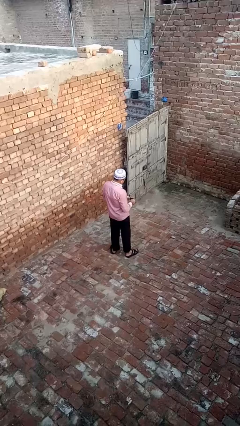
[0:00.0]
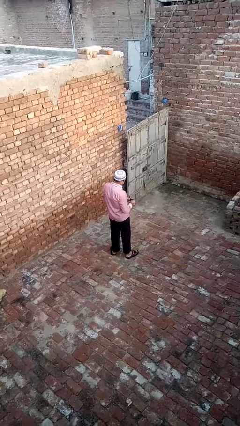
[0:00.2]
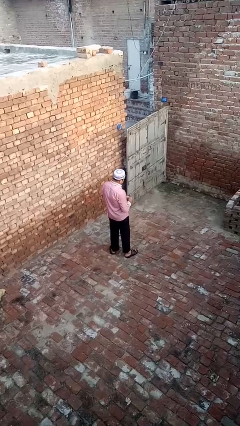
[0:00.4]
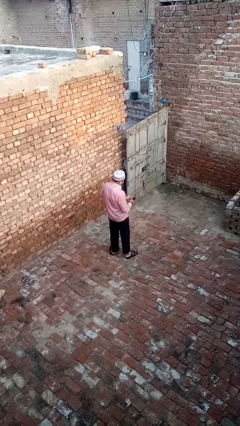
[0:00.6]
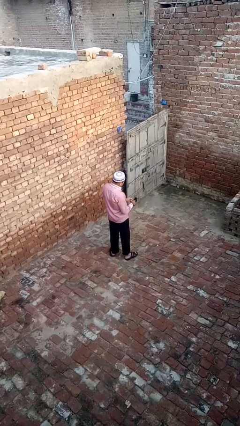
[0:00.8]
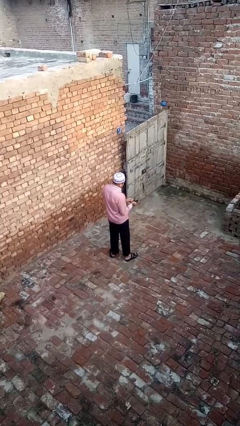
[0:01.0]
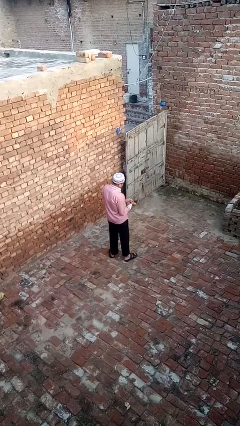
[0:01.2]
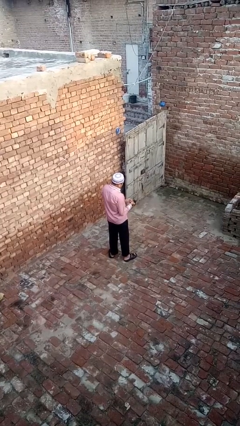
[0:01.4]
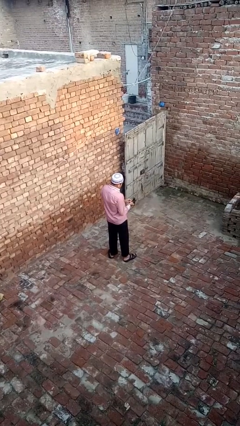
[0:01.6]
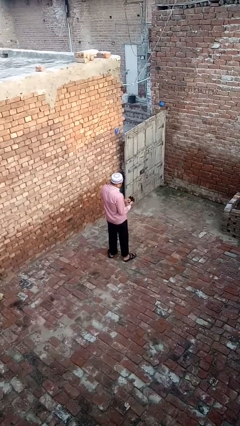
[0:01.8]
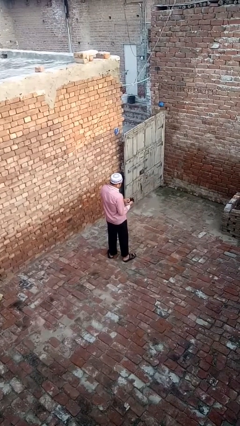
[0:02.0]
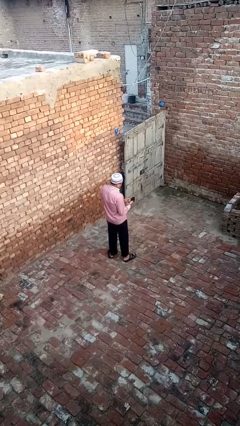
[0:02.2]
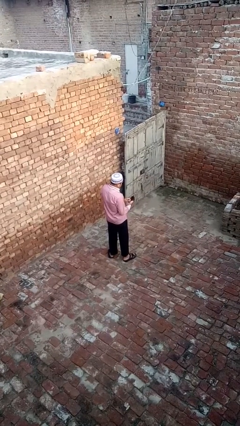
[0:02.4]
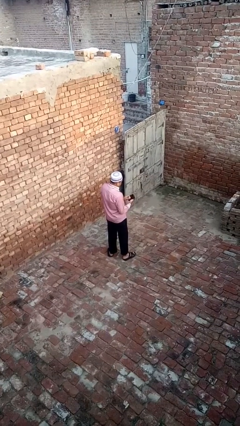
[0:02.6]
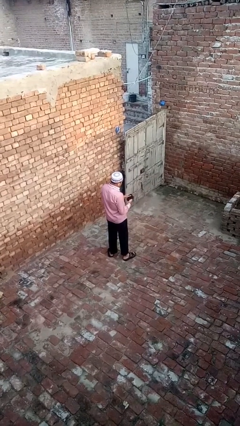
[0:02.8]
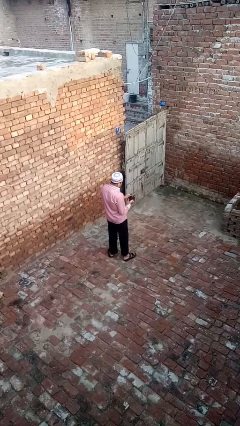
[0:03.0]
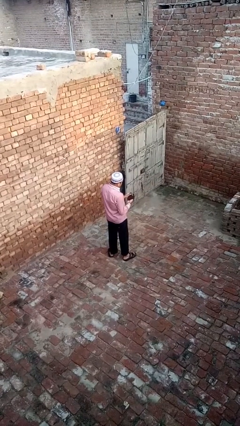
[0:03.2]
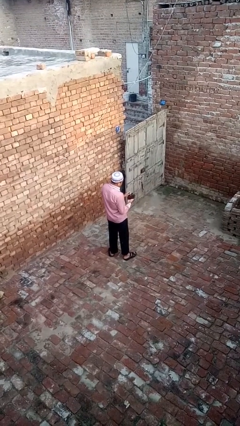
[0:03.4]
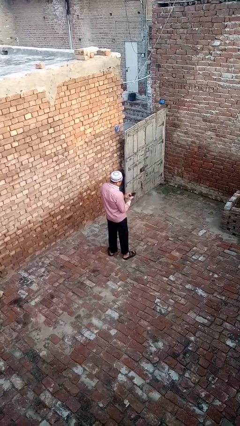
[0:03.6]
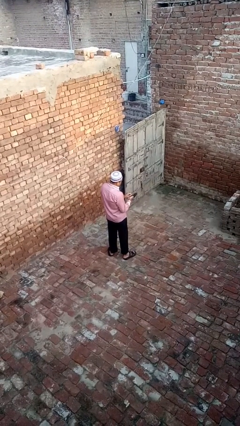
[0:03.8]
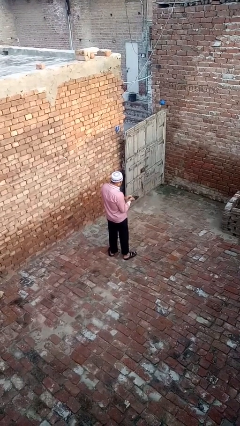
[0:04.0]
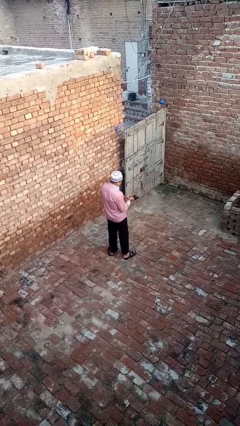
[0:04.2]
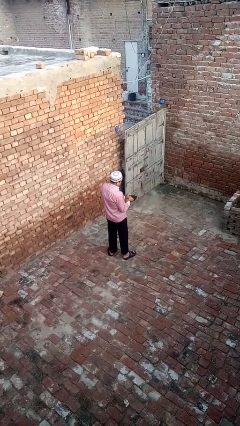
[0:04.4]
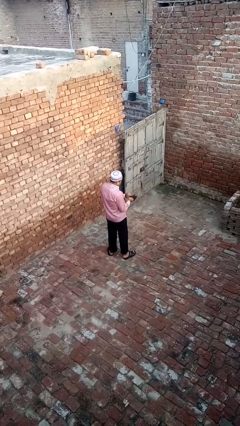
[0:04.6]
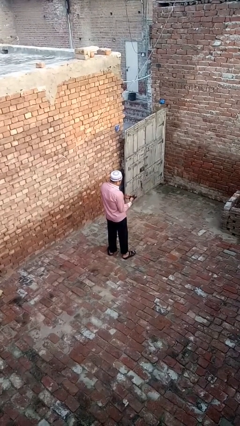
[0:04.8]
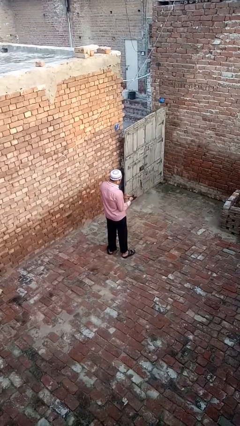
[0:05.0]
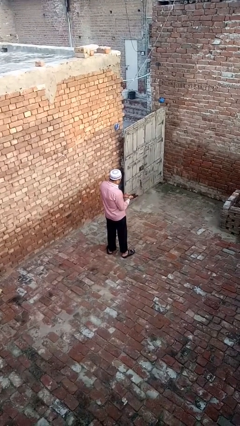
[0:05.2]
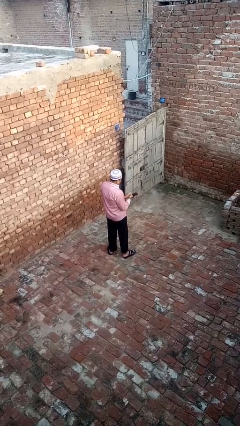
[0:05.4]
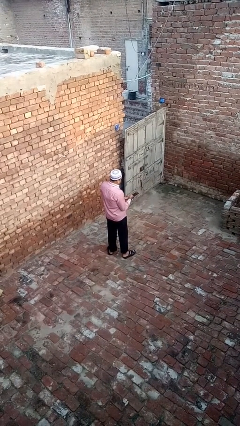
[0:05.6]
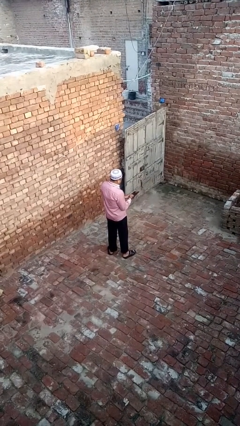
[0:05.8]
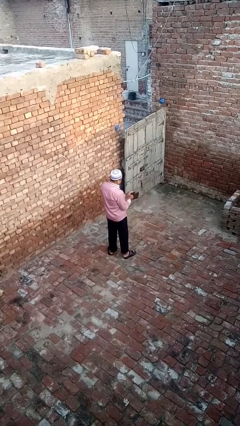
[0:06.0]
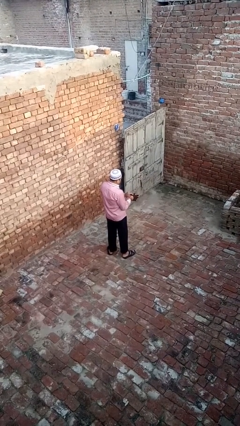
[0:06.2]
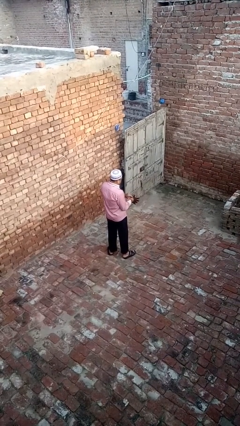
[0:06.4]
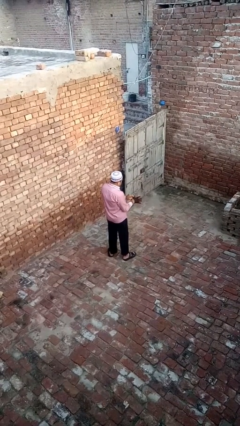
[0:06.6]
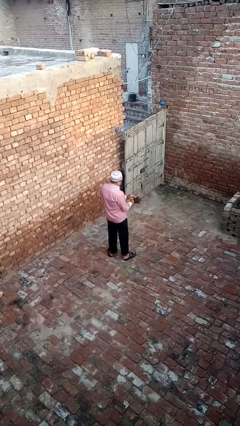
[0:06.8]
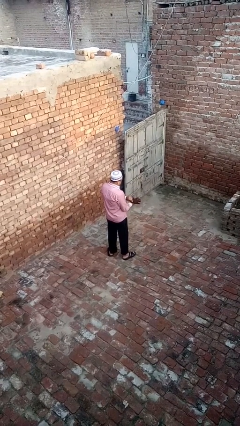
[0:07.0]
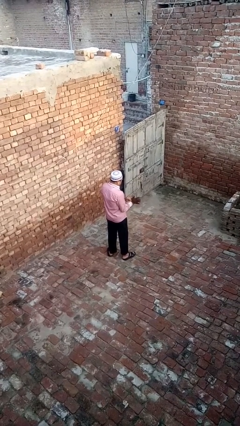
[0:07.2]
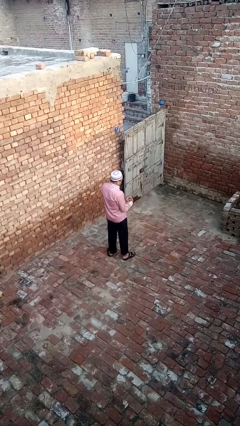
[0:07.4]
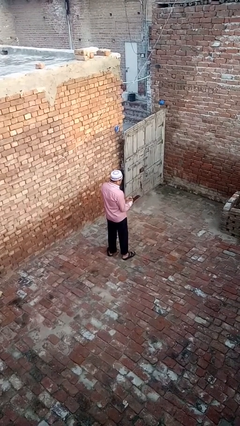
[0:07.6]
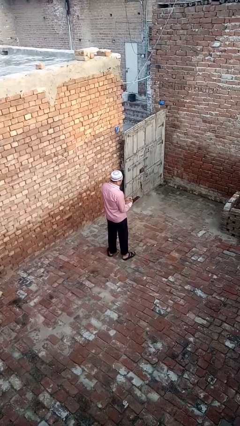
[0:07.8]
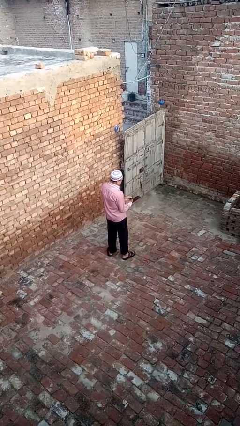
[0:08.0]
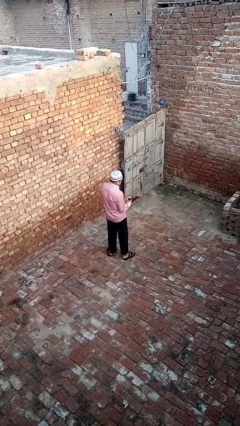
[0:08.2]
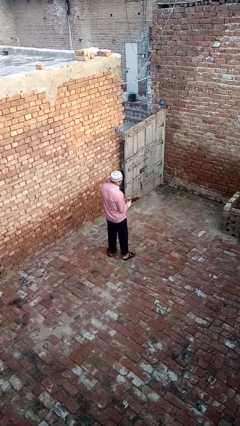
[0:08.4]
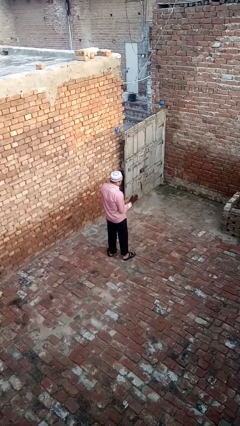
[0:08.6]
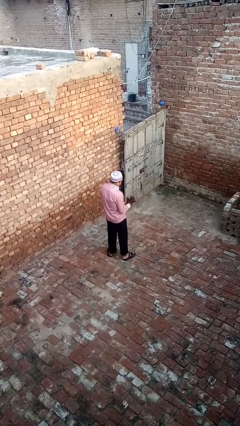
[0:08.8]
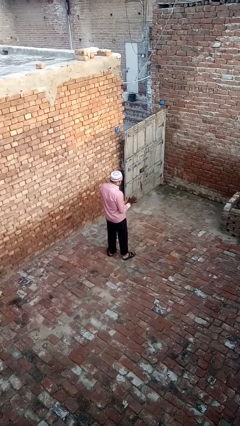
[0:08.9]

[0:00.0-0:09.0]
person puts on gloves

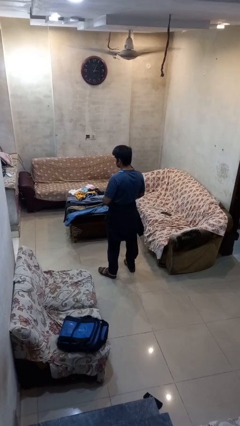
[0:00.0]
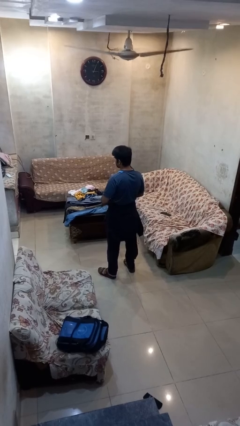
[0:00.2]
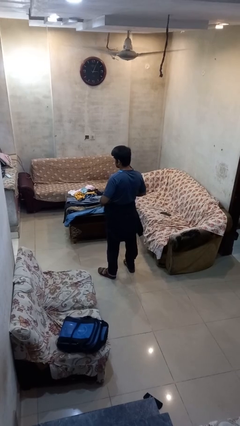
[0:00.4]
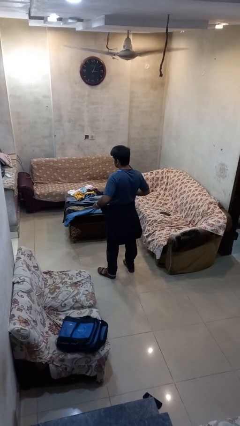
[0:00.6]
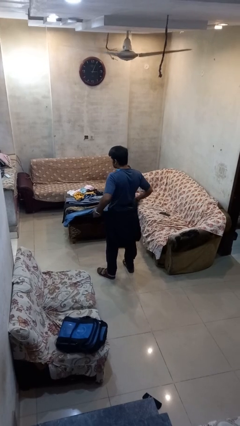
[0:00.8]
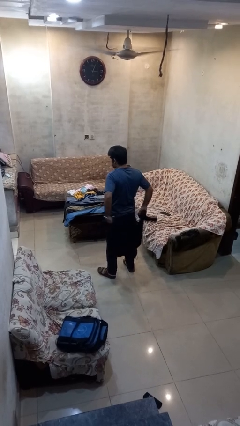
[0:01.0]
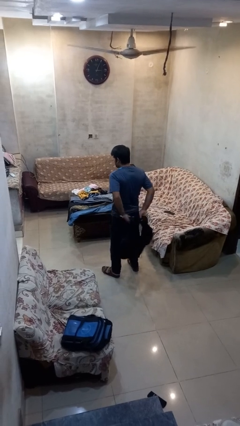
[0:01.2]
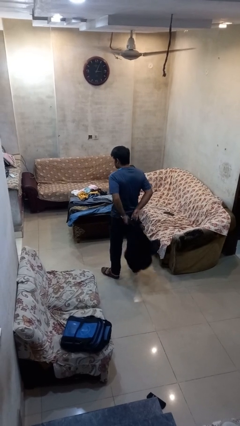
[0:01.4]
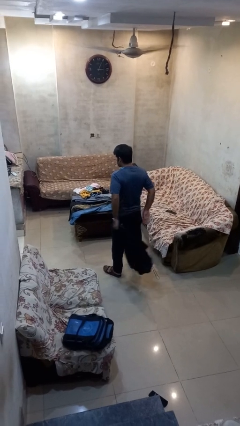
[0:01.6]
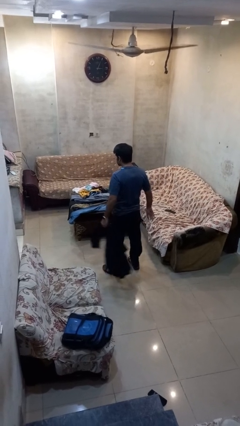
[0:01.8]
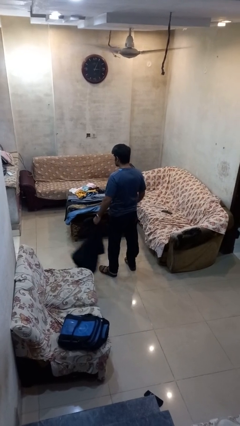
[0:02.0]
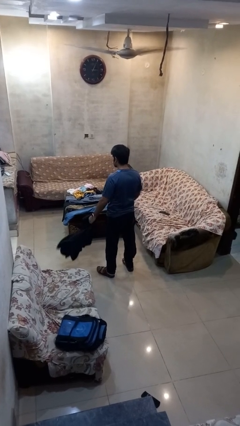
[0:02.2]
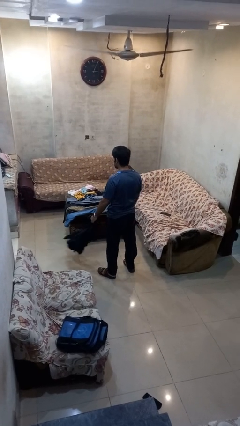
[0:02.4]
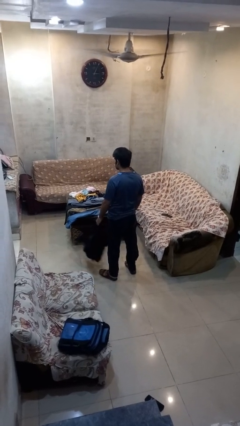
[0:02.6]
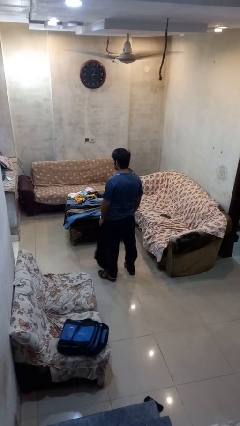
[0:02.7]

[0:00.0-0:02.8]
person unties jacket around waist

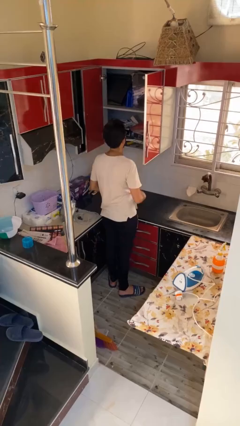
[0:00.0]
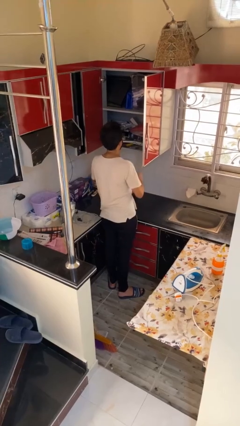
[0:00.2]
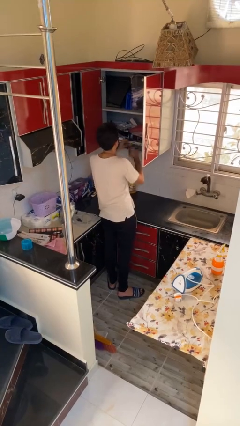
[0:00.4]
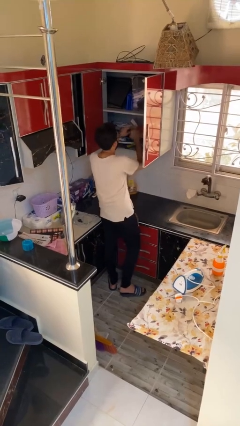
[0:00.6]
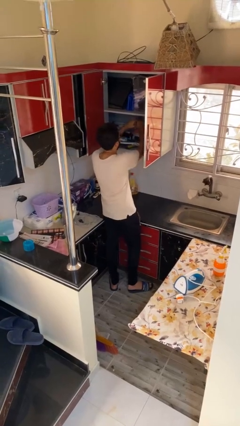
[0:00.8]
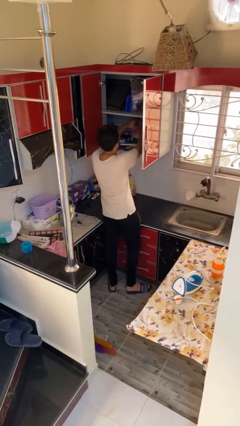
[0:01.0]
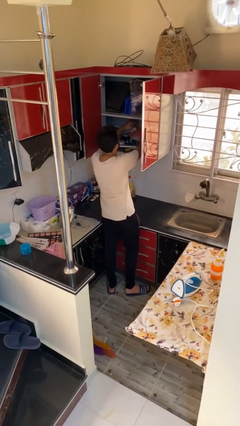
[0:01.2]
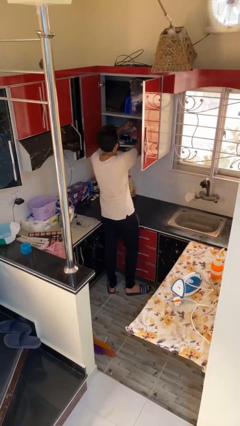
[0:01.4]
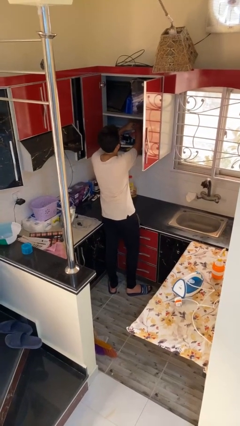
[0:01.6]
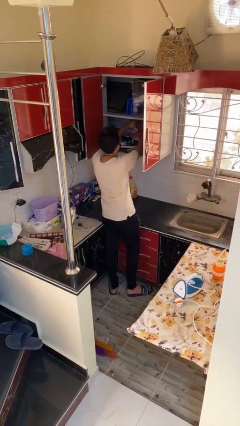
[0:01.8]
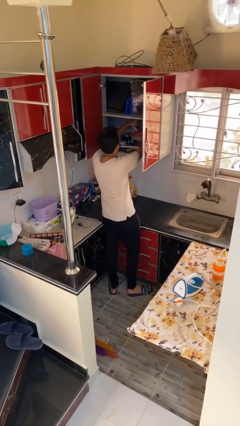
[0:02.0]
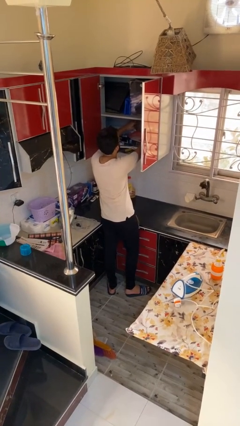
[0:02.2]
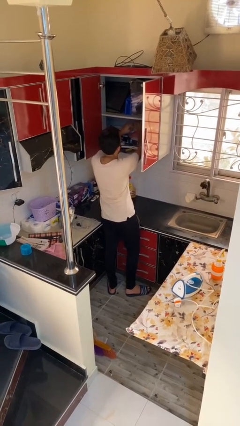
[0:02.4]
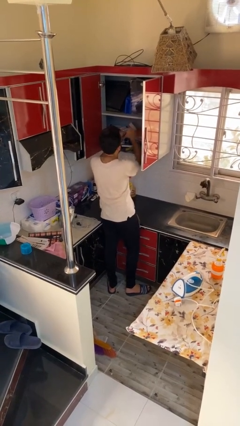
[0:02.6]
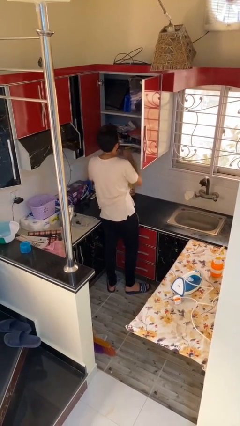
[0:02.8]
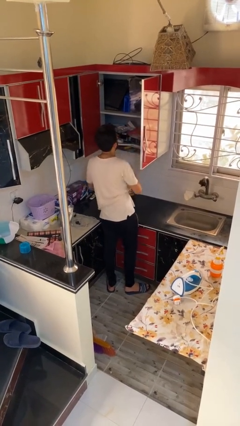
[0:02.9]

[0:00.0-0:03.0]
person searches in cabinet

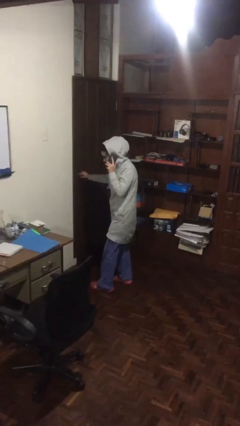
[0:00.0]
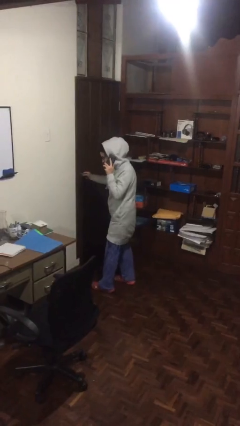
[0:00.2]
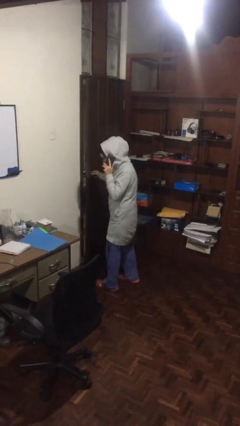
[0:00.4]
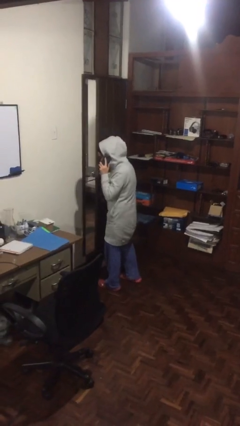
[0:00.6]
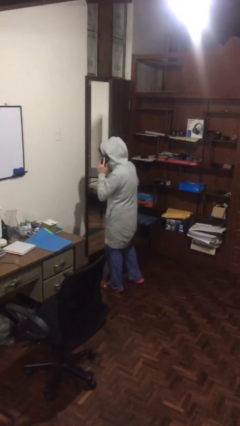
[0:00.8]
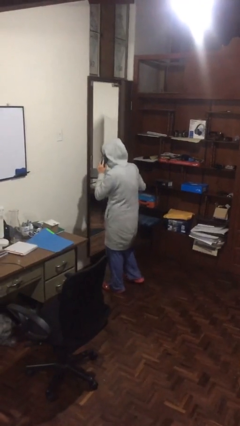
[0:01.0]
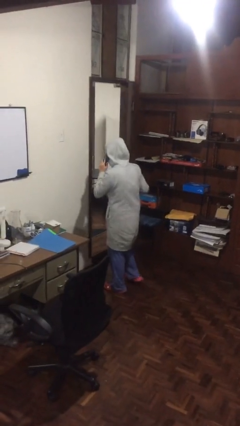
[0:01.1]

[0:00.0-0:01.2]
person opens facility door

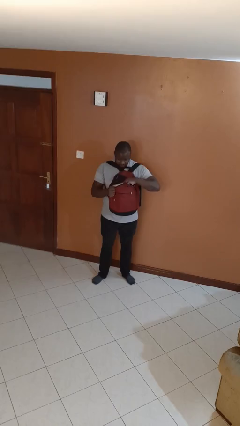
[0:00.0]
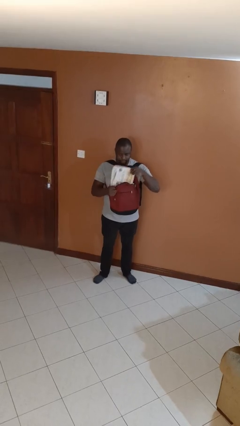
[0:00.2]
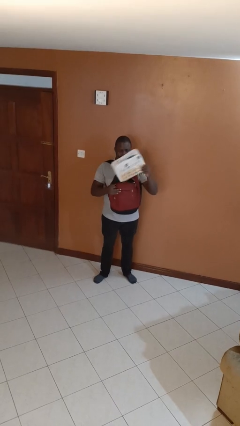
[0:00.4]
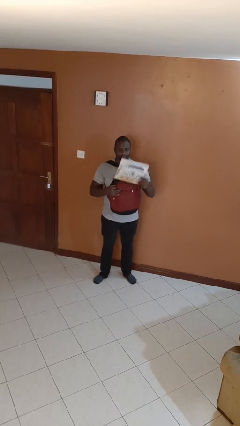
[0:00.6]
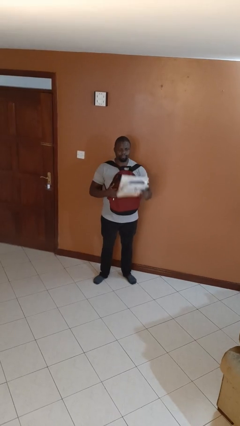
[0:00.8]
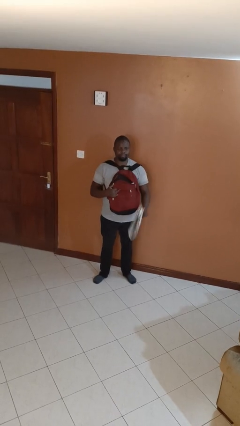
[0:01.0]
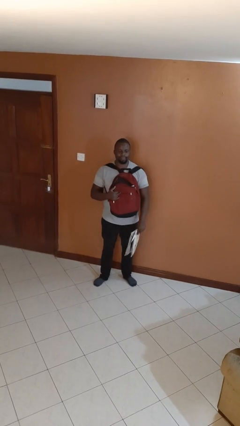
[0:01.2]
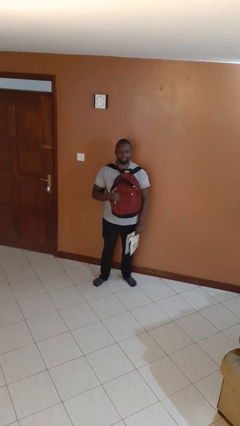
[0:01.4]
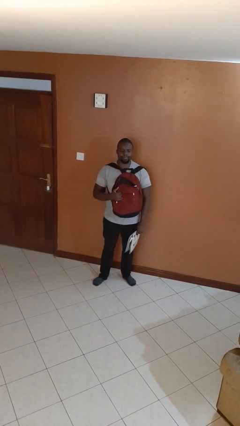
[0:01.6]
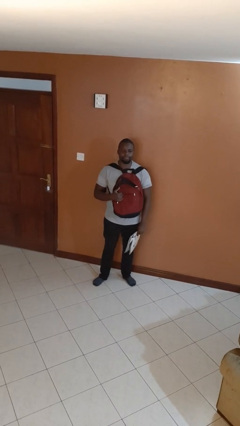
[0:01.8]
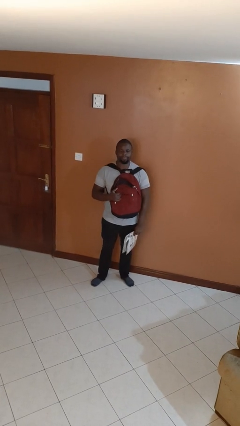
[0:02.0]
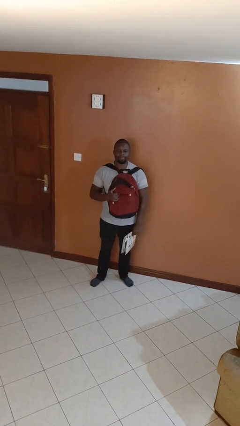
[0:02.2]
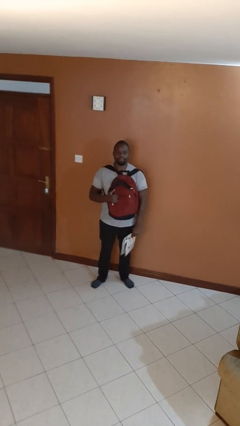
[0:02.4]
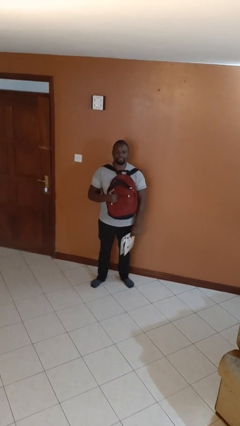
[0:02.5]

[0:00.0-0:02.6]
person takes object from backpack
